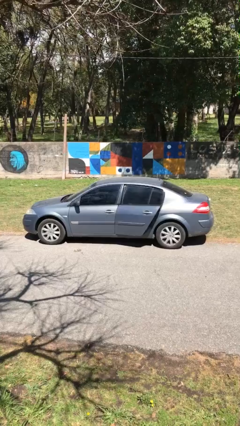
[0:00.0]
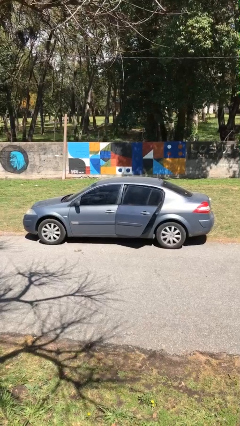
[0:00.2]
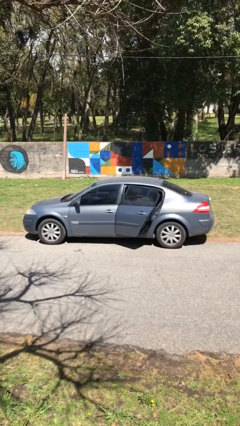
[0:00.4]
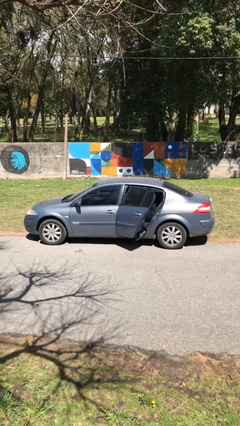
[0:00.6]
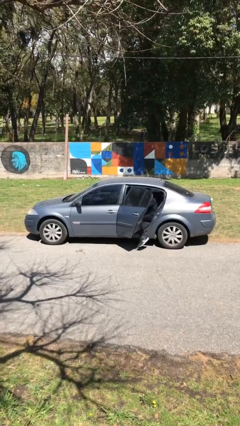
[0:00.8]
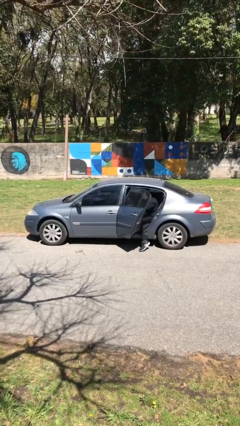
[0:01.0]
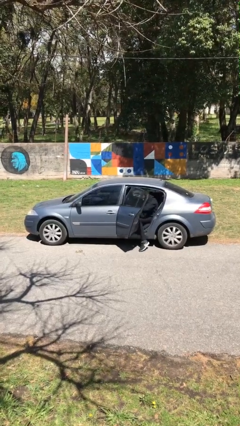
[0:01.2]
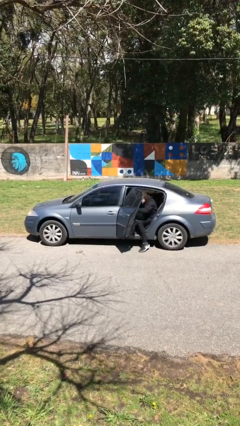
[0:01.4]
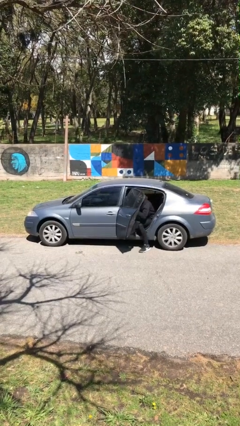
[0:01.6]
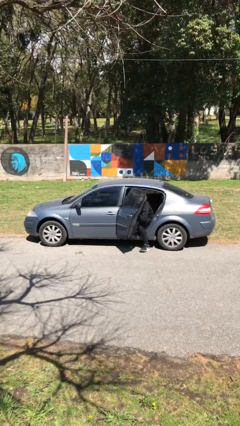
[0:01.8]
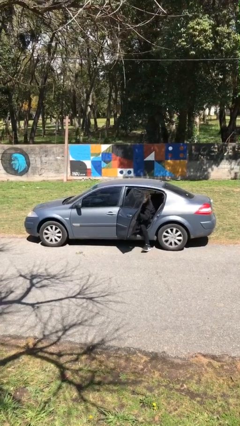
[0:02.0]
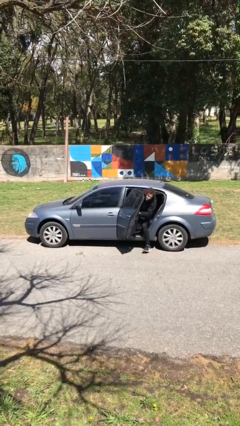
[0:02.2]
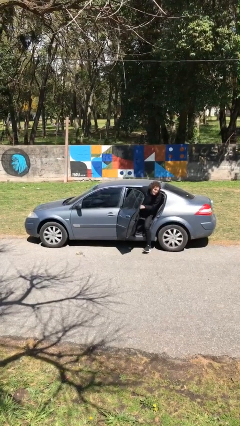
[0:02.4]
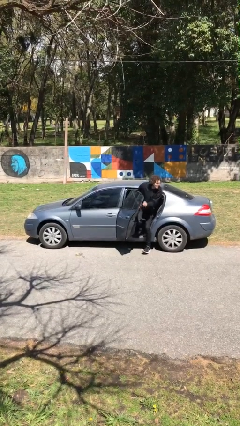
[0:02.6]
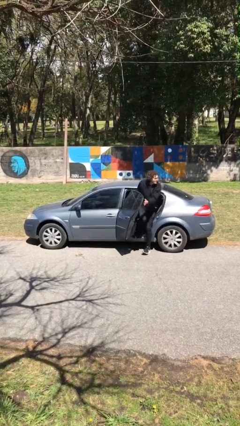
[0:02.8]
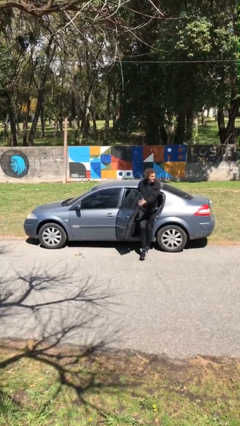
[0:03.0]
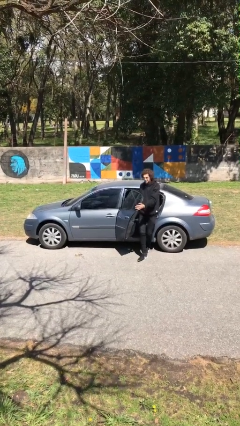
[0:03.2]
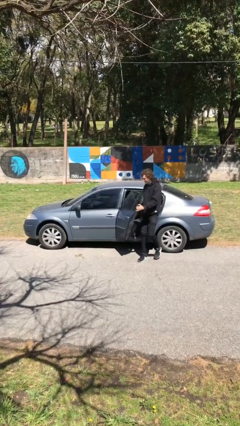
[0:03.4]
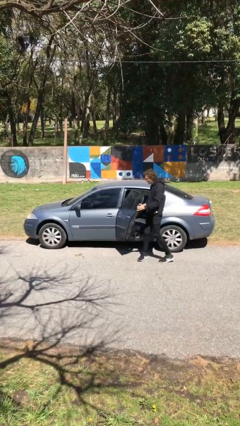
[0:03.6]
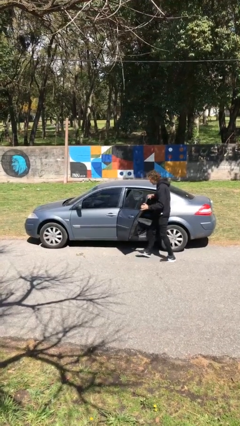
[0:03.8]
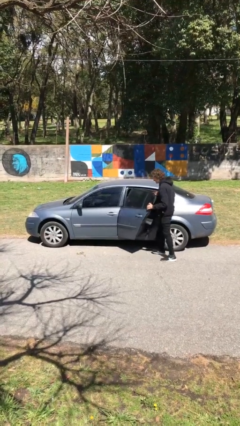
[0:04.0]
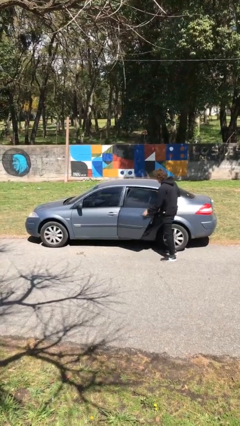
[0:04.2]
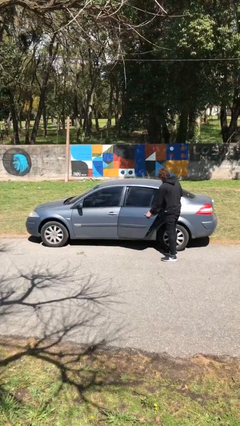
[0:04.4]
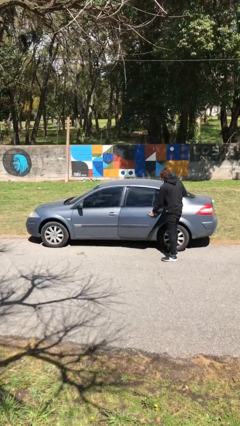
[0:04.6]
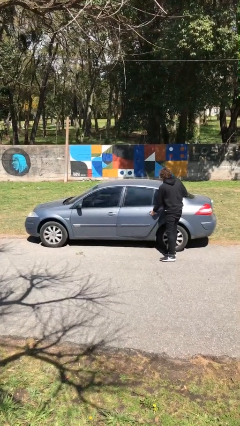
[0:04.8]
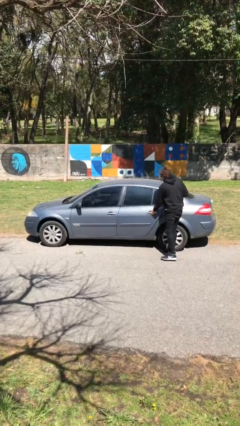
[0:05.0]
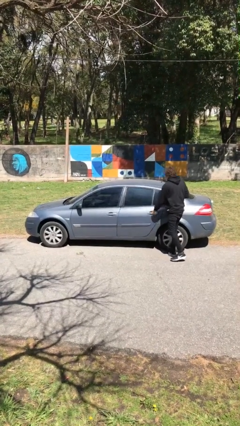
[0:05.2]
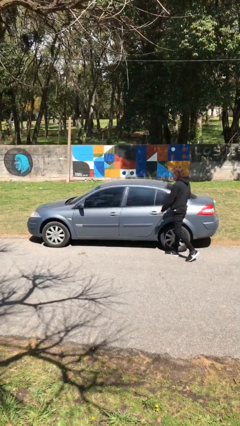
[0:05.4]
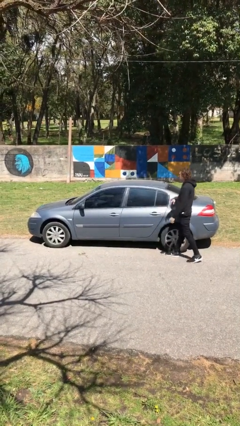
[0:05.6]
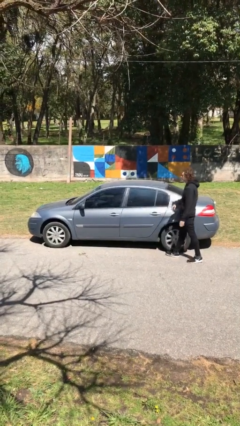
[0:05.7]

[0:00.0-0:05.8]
car drops off person

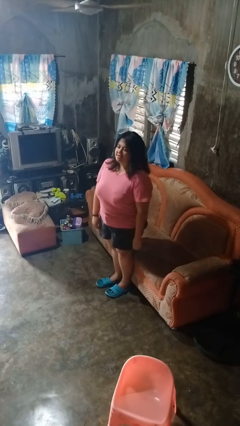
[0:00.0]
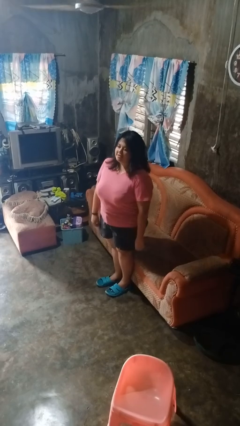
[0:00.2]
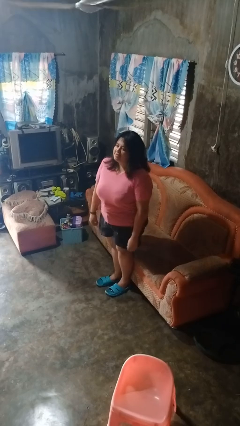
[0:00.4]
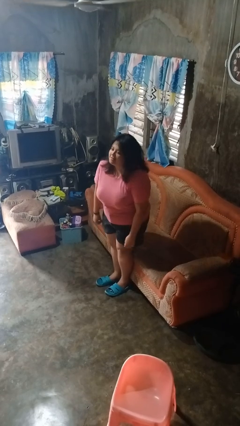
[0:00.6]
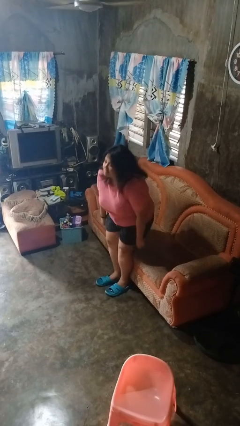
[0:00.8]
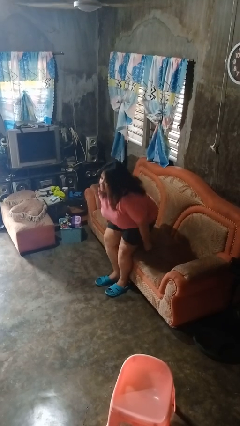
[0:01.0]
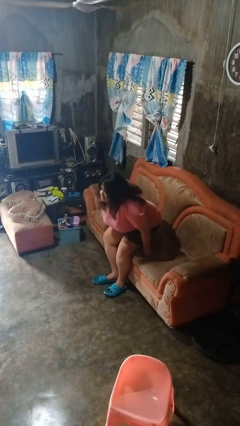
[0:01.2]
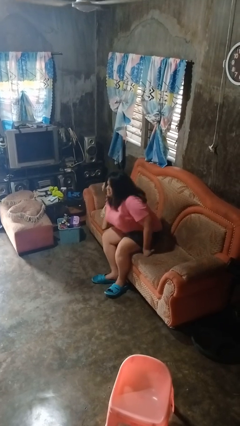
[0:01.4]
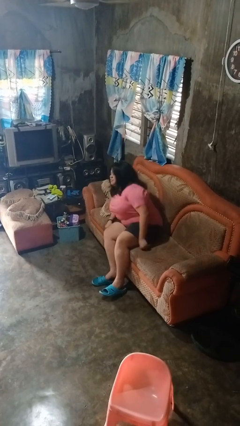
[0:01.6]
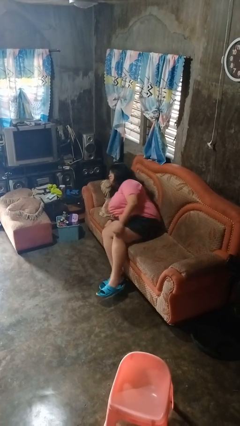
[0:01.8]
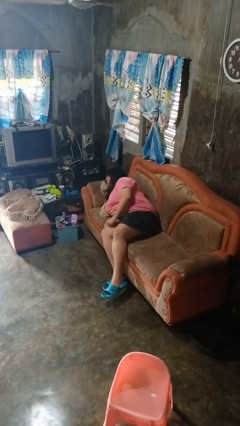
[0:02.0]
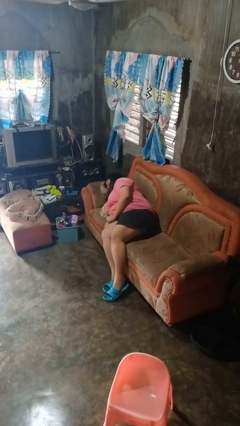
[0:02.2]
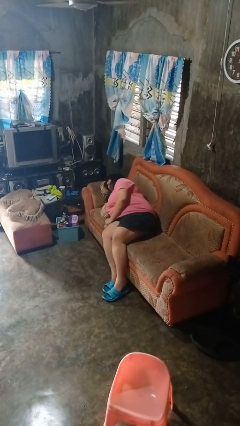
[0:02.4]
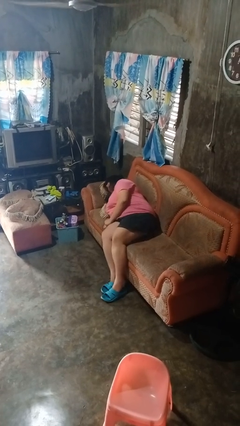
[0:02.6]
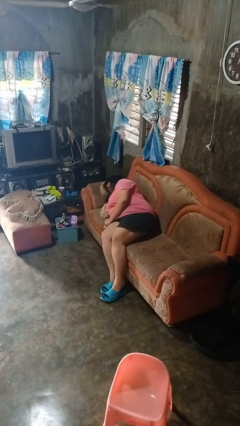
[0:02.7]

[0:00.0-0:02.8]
person lies down on couch

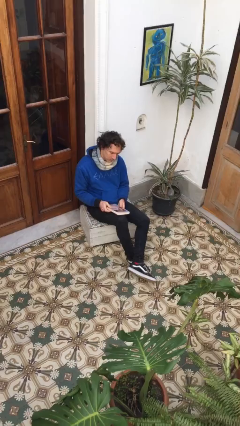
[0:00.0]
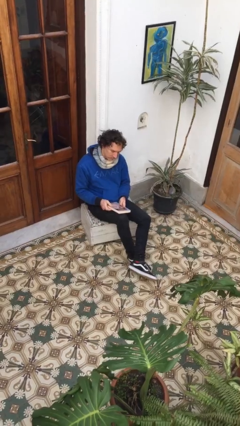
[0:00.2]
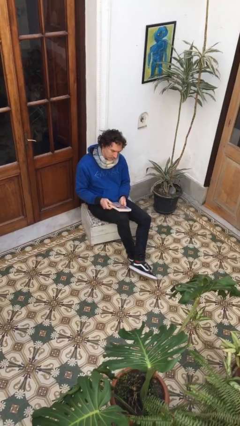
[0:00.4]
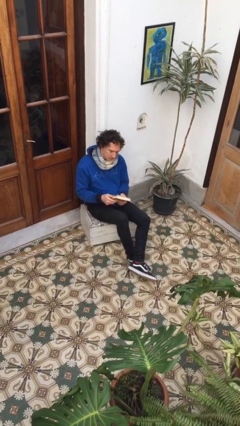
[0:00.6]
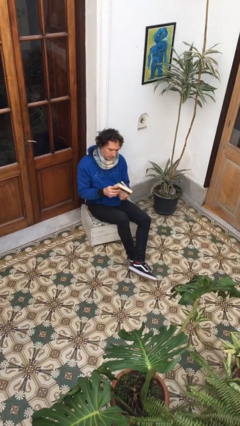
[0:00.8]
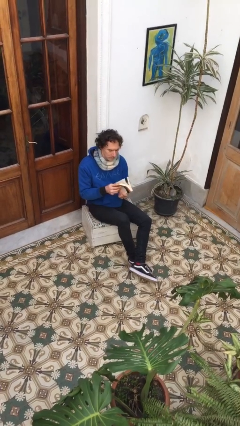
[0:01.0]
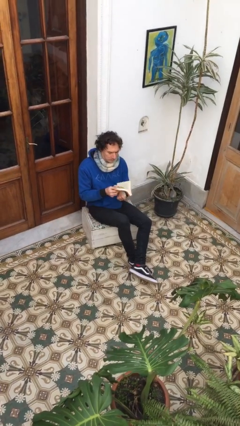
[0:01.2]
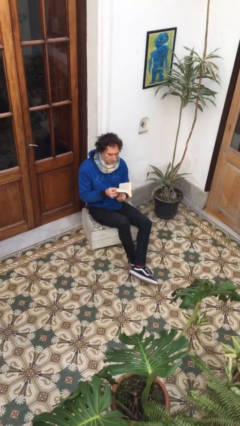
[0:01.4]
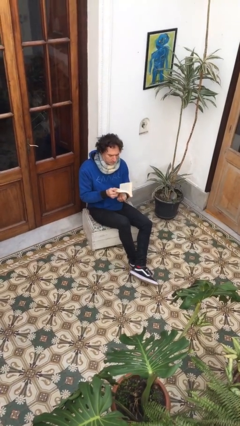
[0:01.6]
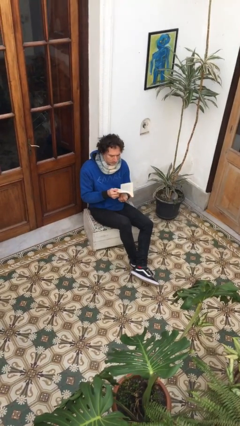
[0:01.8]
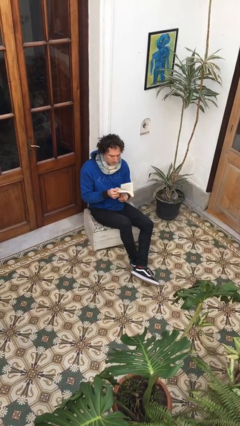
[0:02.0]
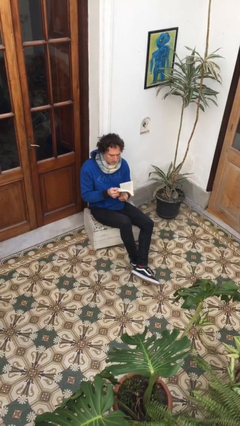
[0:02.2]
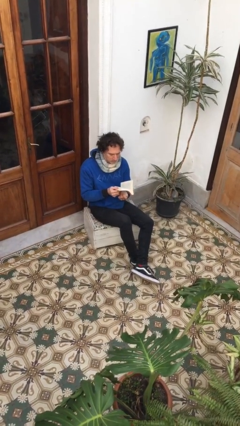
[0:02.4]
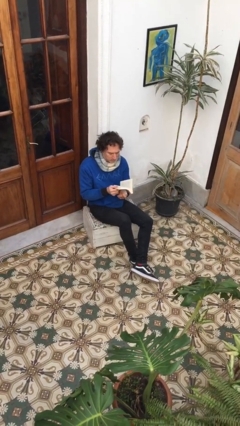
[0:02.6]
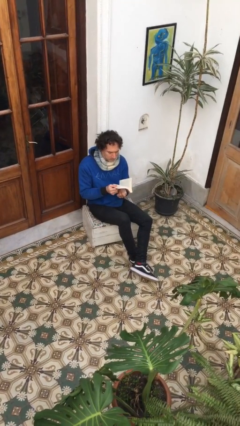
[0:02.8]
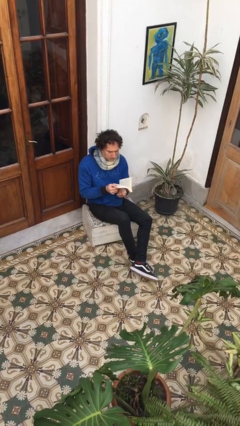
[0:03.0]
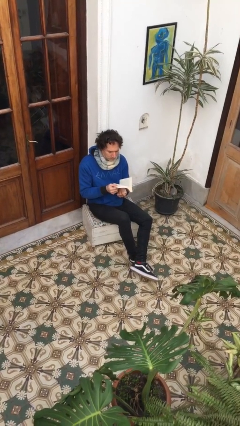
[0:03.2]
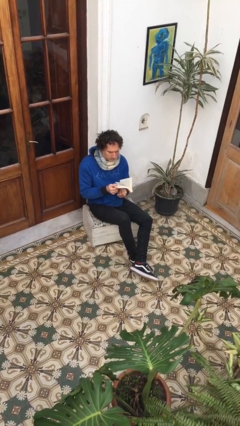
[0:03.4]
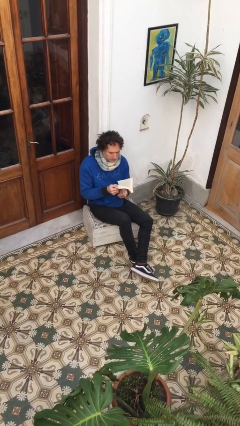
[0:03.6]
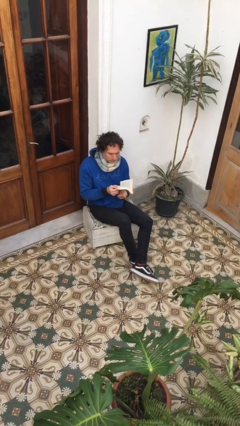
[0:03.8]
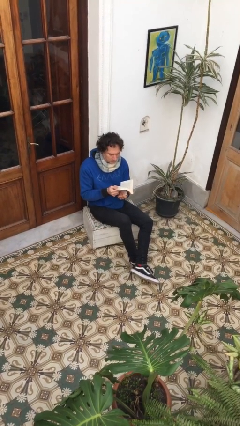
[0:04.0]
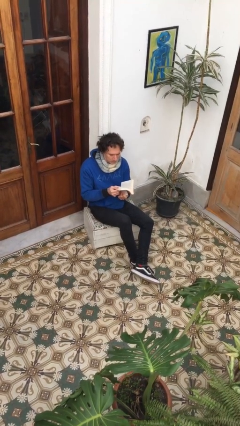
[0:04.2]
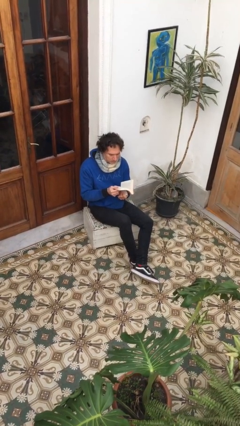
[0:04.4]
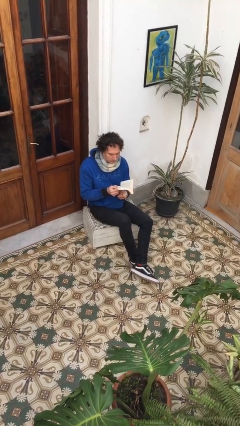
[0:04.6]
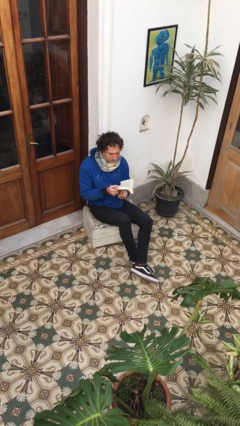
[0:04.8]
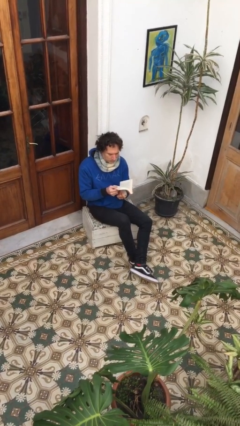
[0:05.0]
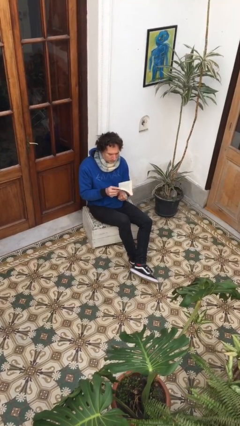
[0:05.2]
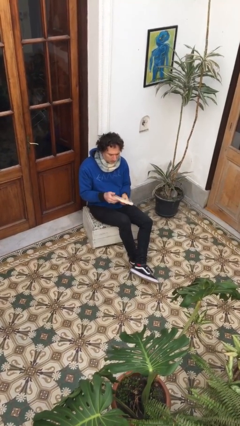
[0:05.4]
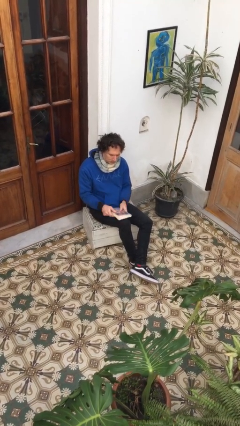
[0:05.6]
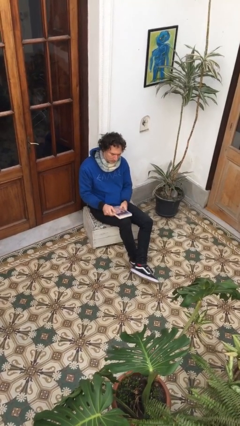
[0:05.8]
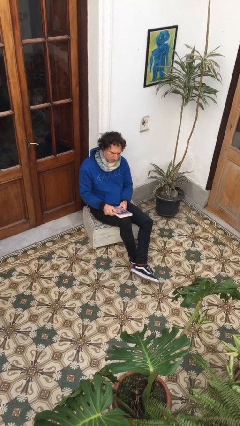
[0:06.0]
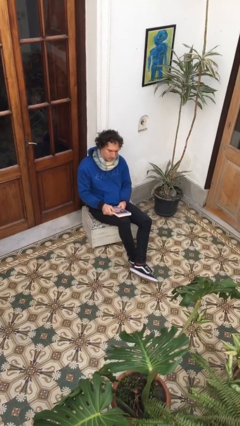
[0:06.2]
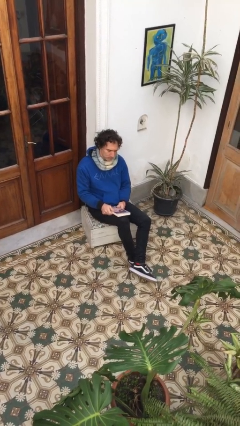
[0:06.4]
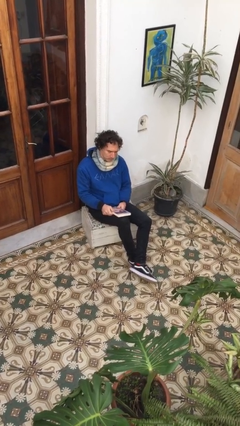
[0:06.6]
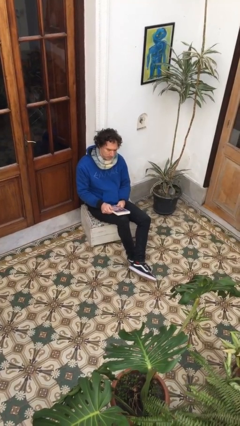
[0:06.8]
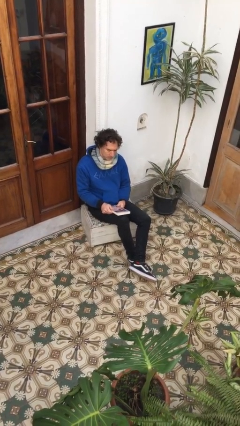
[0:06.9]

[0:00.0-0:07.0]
person reads book

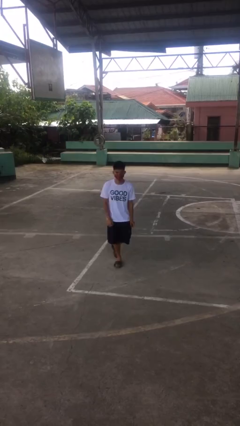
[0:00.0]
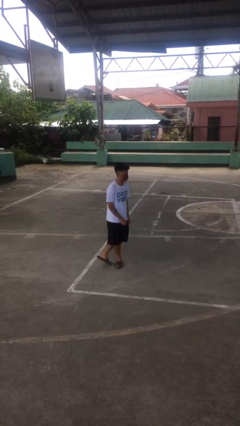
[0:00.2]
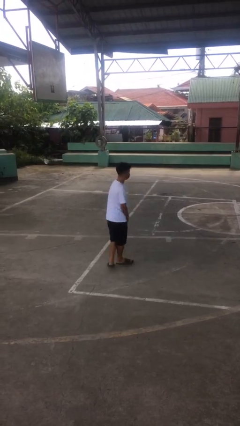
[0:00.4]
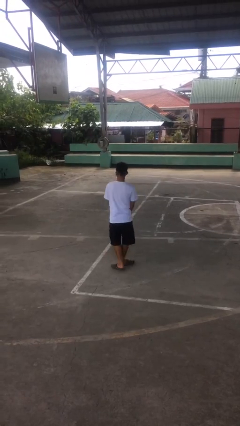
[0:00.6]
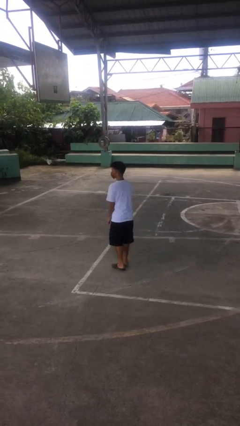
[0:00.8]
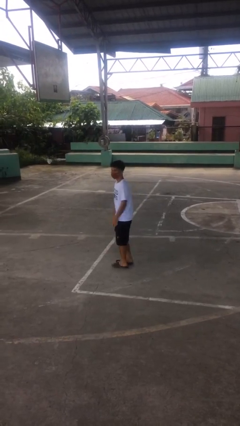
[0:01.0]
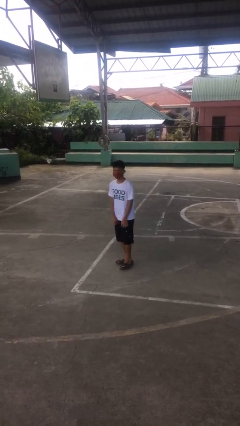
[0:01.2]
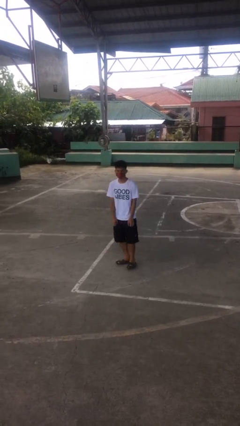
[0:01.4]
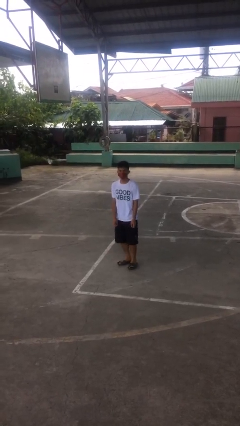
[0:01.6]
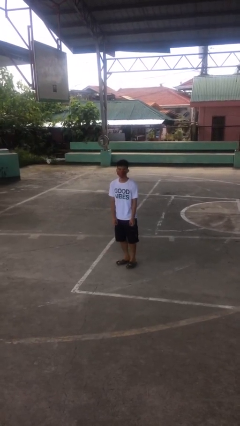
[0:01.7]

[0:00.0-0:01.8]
person twirls

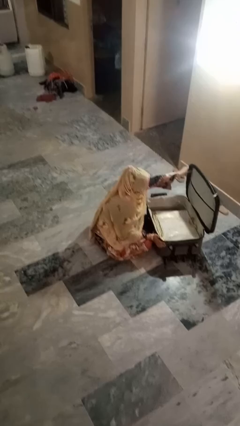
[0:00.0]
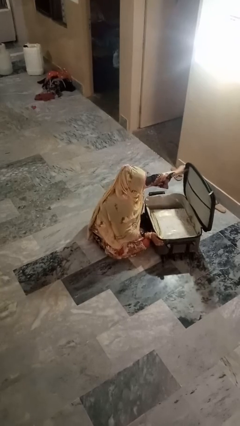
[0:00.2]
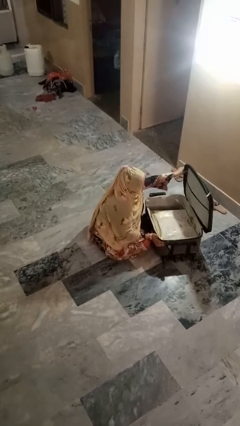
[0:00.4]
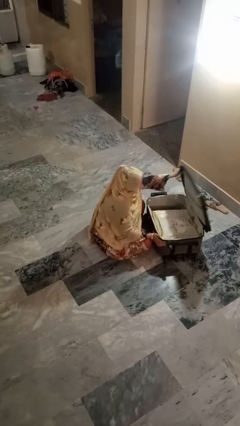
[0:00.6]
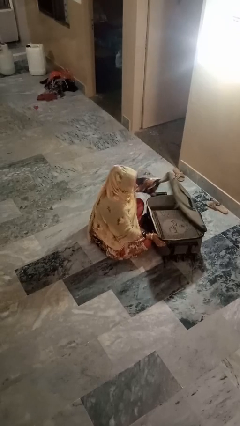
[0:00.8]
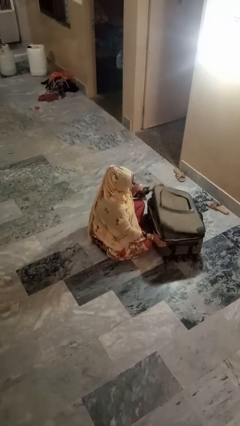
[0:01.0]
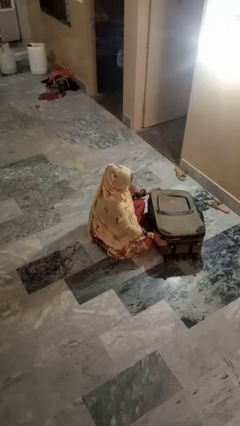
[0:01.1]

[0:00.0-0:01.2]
person closes suitcase
